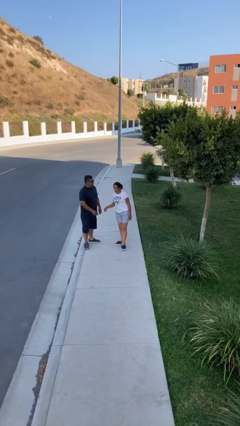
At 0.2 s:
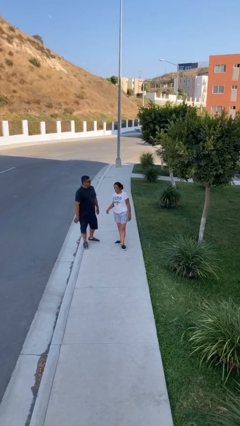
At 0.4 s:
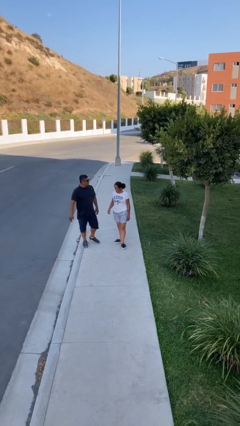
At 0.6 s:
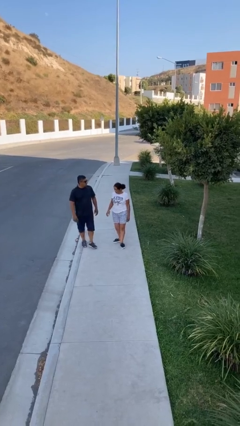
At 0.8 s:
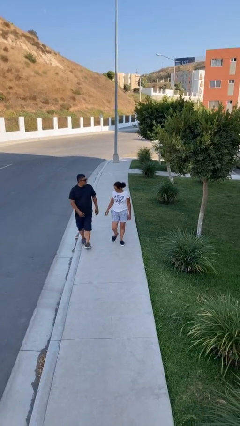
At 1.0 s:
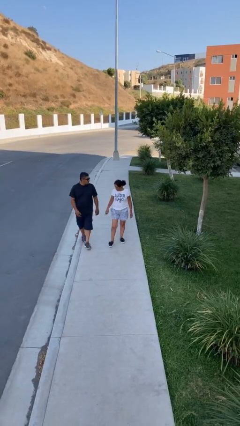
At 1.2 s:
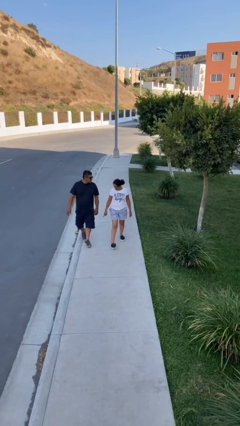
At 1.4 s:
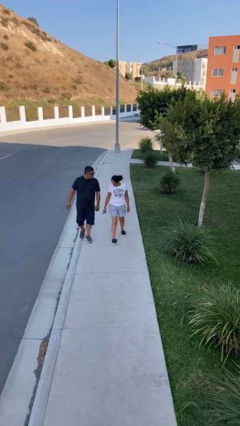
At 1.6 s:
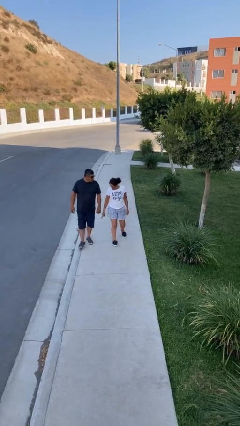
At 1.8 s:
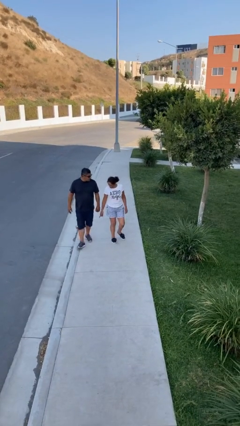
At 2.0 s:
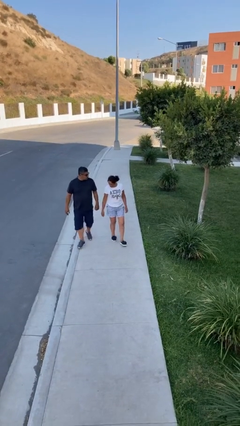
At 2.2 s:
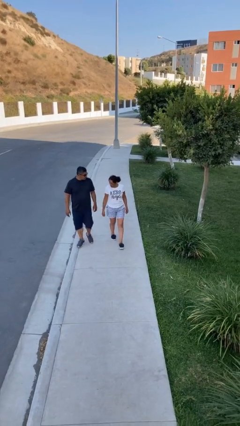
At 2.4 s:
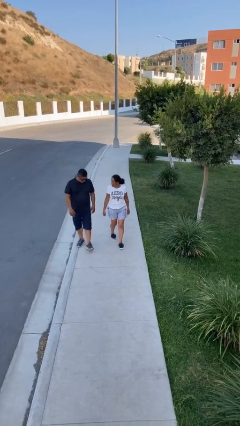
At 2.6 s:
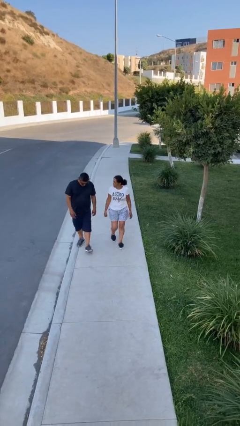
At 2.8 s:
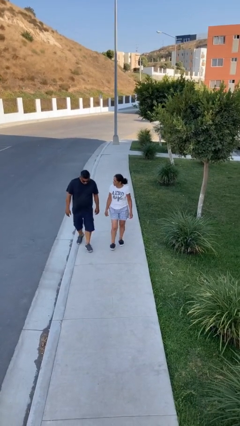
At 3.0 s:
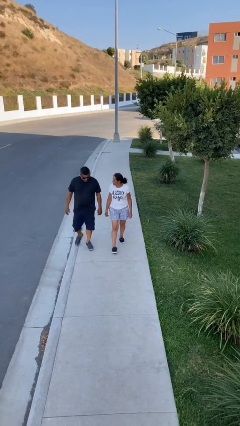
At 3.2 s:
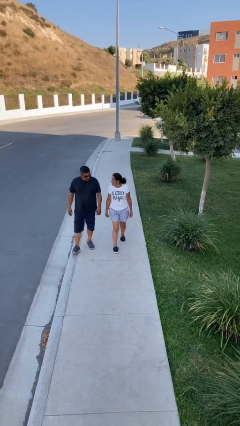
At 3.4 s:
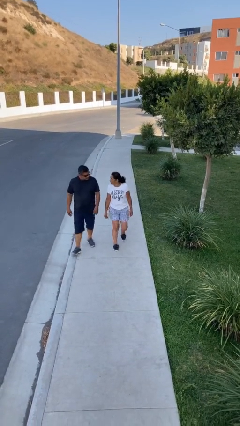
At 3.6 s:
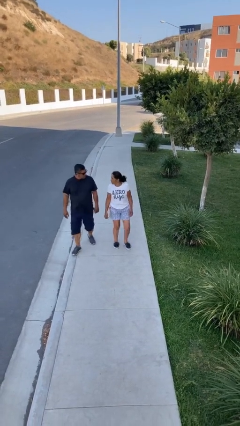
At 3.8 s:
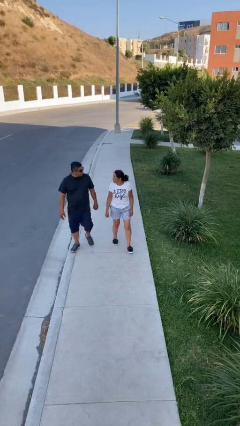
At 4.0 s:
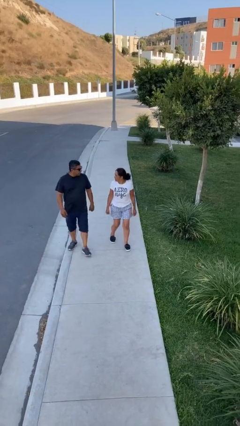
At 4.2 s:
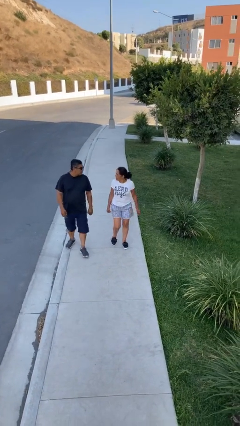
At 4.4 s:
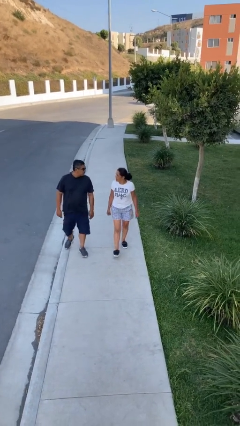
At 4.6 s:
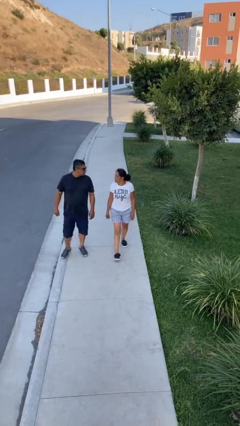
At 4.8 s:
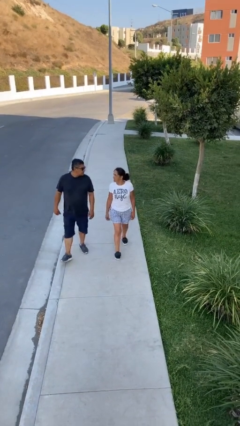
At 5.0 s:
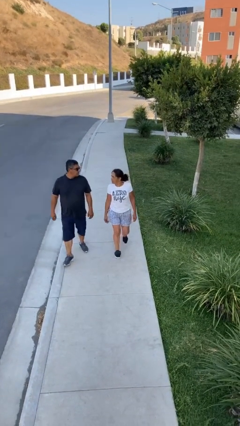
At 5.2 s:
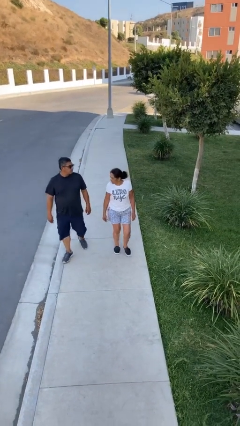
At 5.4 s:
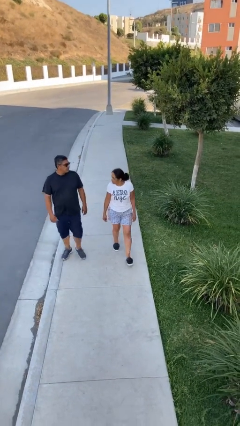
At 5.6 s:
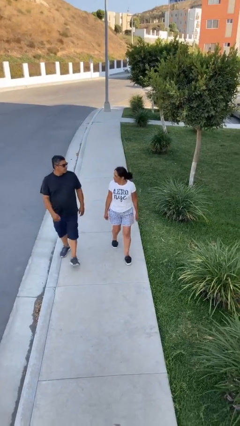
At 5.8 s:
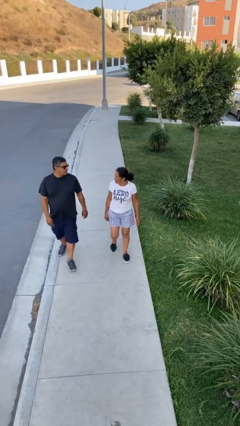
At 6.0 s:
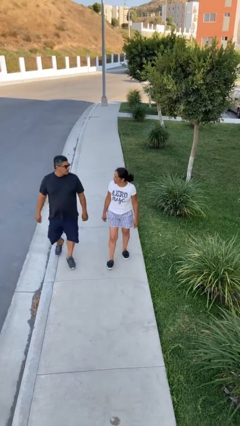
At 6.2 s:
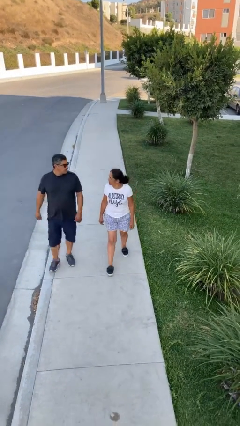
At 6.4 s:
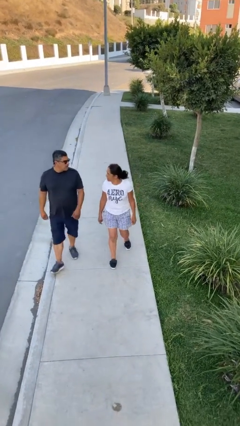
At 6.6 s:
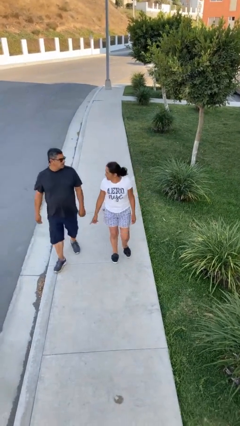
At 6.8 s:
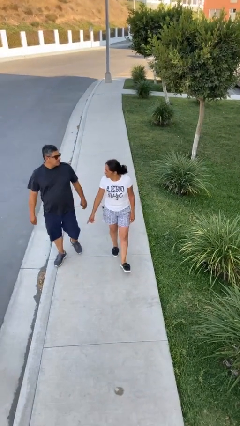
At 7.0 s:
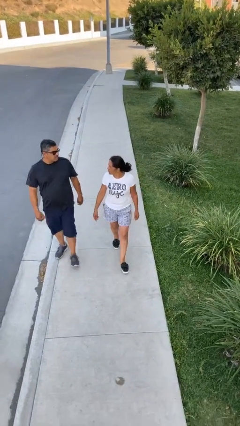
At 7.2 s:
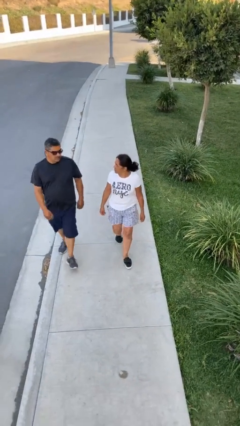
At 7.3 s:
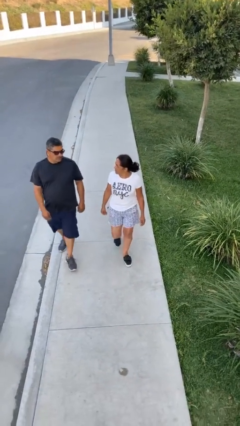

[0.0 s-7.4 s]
person talks to person

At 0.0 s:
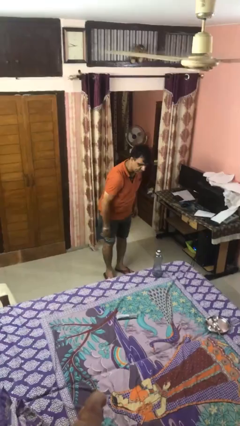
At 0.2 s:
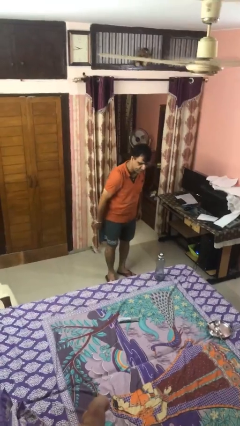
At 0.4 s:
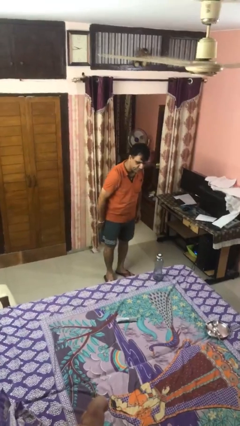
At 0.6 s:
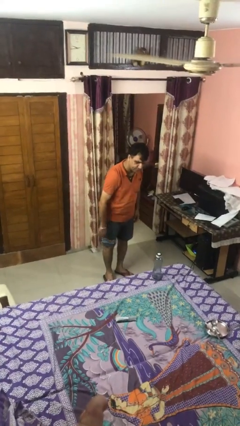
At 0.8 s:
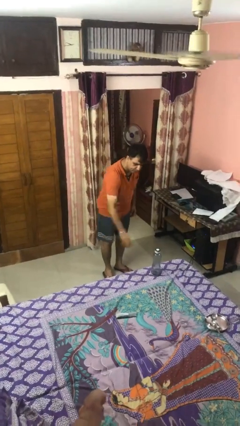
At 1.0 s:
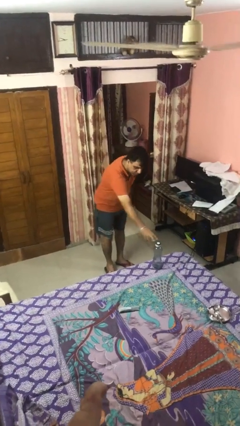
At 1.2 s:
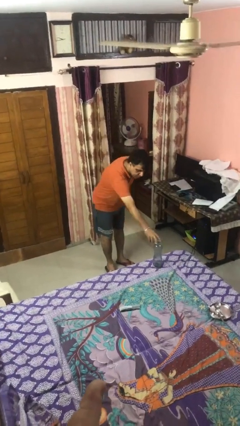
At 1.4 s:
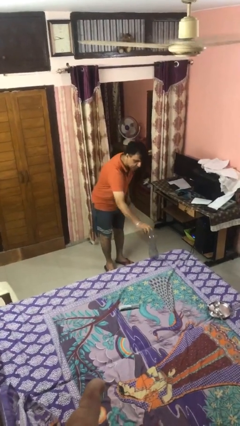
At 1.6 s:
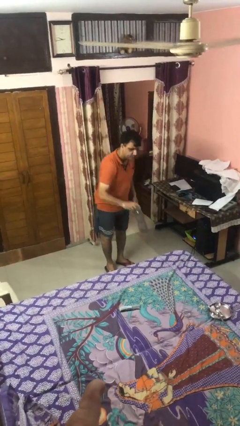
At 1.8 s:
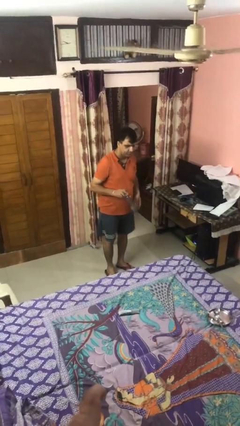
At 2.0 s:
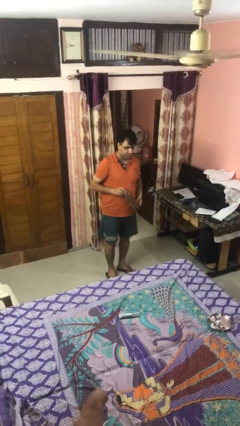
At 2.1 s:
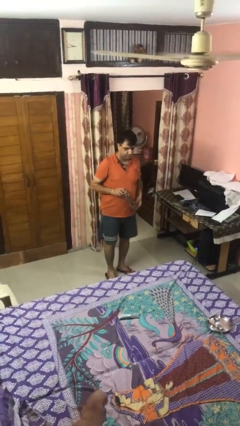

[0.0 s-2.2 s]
person picks up object from bed

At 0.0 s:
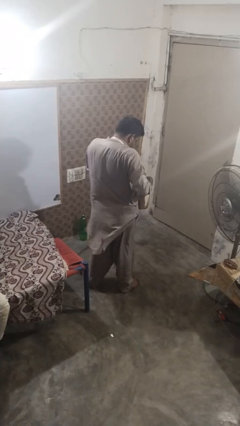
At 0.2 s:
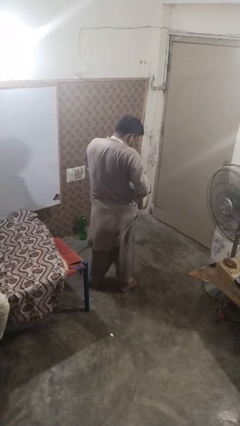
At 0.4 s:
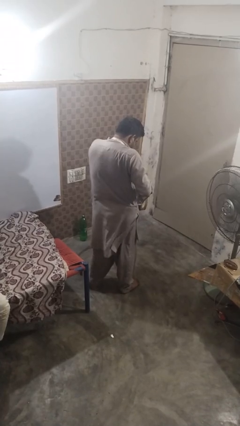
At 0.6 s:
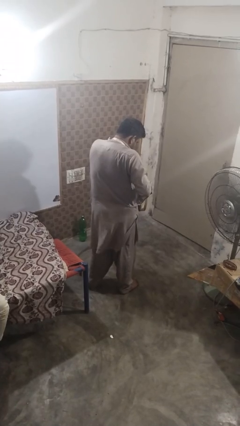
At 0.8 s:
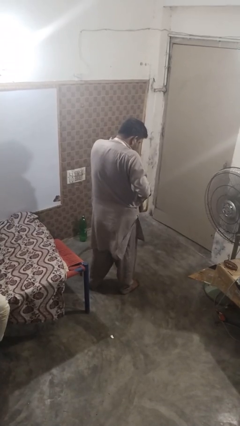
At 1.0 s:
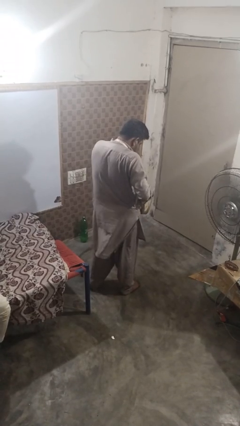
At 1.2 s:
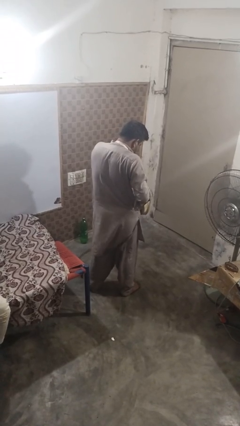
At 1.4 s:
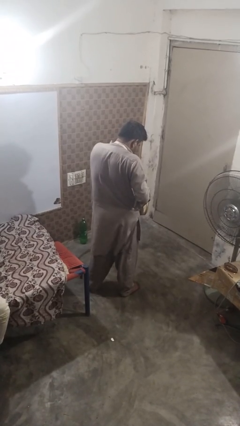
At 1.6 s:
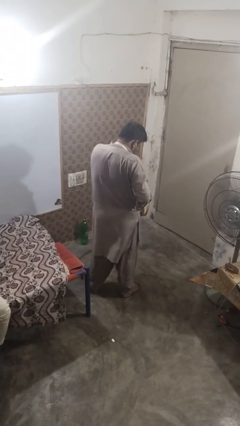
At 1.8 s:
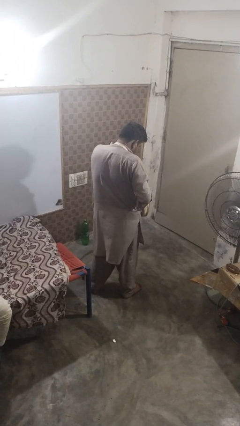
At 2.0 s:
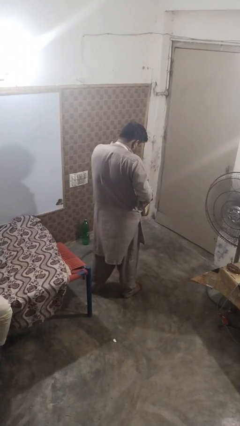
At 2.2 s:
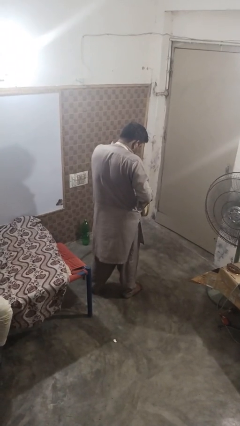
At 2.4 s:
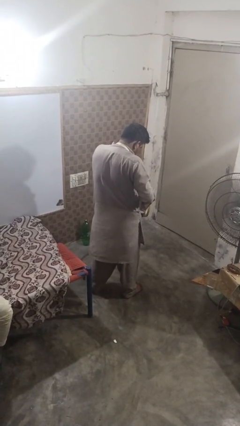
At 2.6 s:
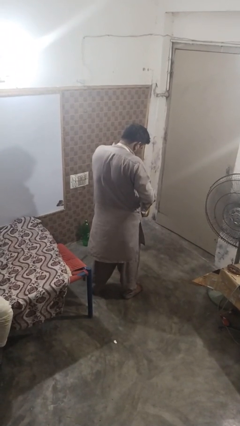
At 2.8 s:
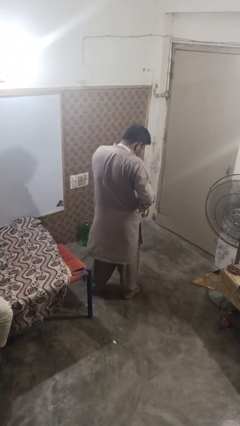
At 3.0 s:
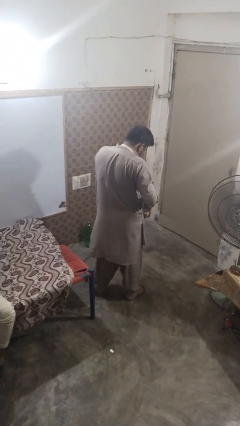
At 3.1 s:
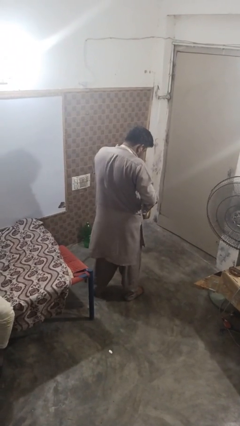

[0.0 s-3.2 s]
person puts object into purse

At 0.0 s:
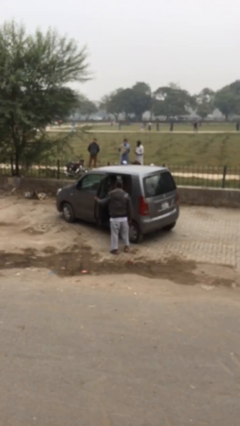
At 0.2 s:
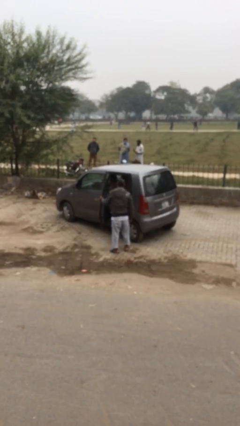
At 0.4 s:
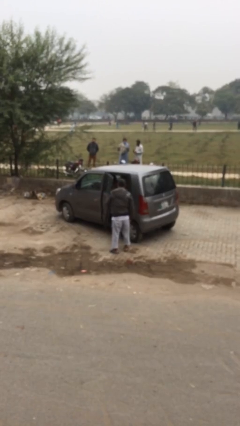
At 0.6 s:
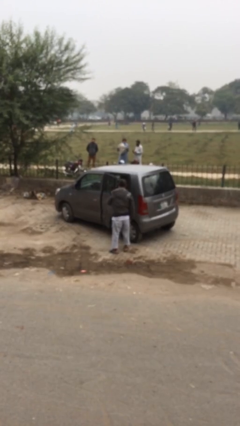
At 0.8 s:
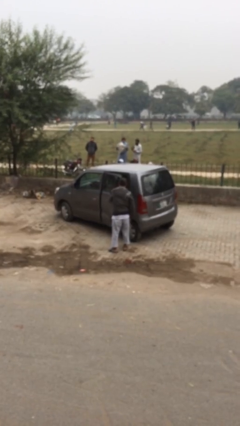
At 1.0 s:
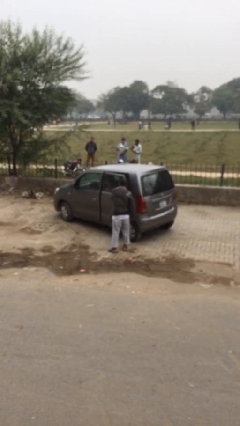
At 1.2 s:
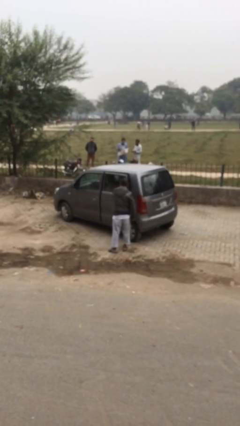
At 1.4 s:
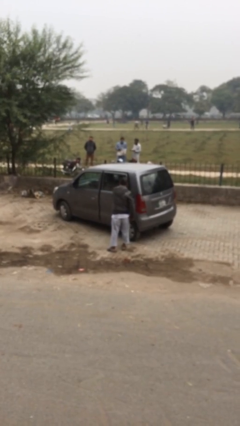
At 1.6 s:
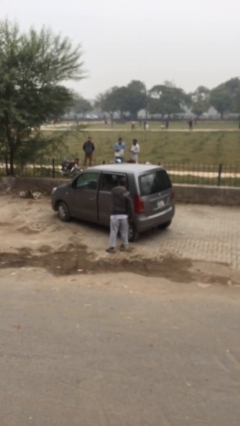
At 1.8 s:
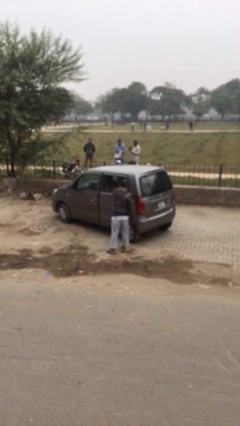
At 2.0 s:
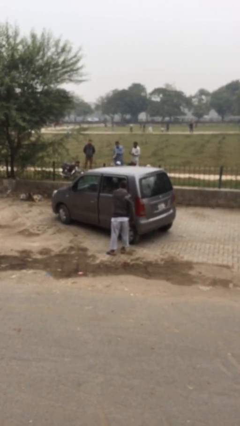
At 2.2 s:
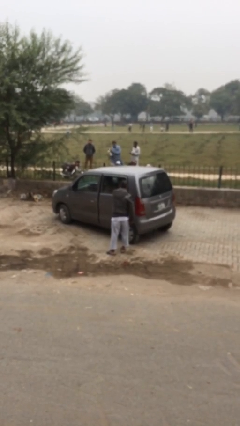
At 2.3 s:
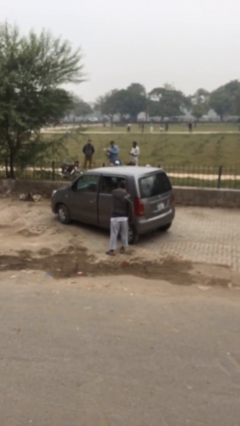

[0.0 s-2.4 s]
person closes car door

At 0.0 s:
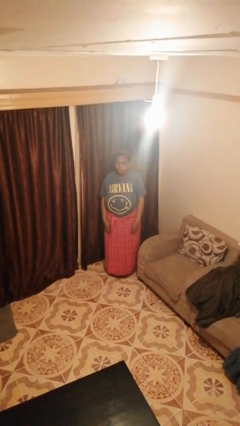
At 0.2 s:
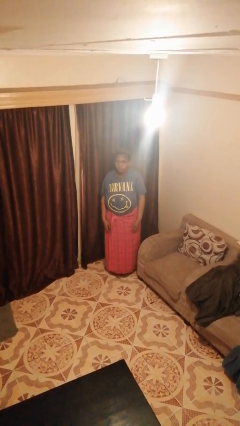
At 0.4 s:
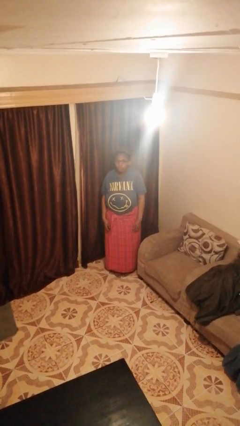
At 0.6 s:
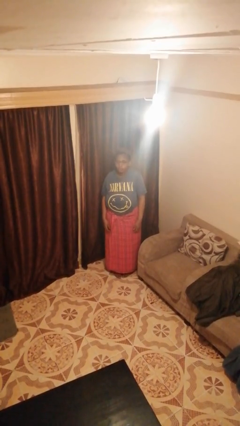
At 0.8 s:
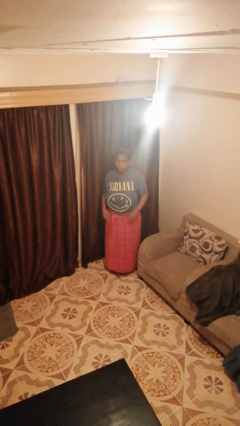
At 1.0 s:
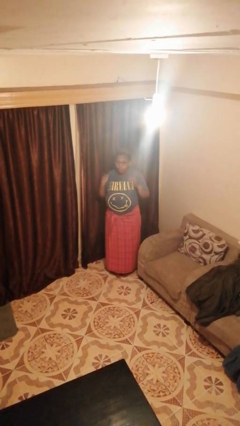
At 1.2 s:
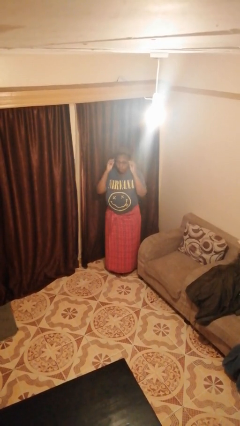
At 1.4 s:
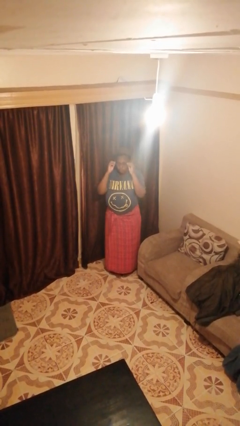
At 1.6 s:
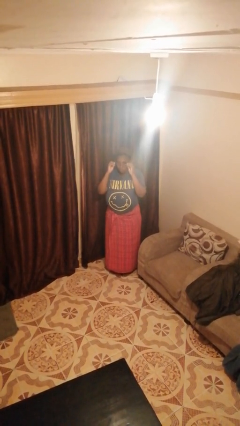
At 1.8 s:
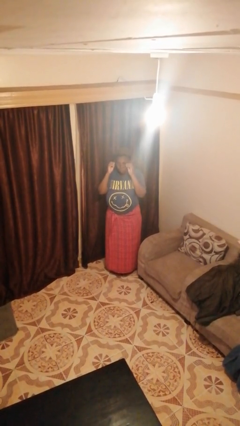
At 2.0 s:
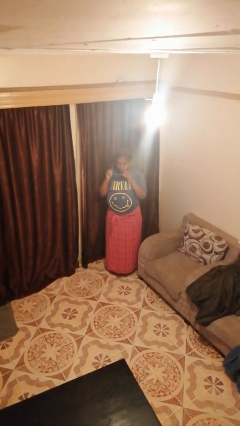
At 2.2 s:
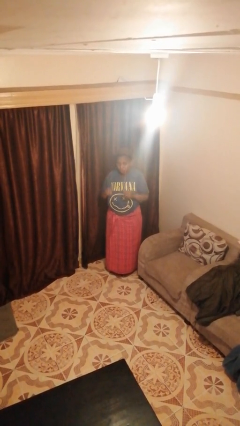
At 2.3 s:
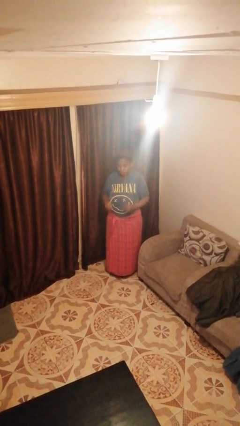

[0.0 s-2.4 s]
person takes off glasses
